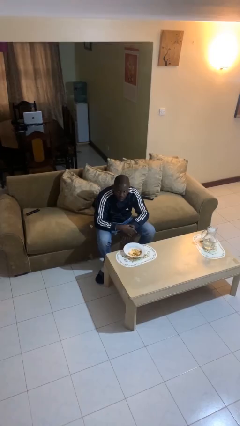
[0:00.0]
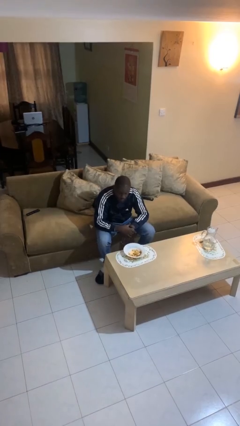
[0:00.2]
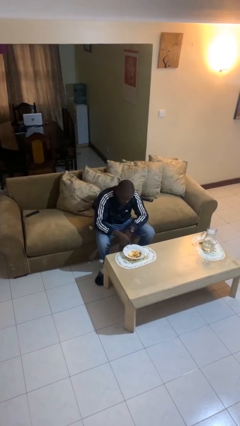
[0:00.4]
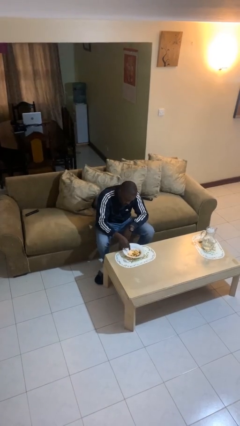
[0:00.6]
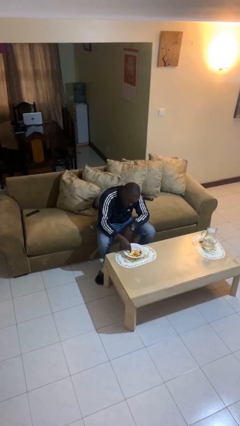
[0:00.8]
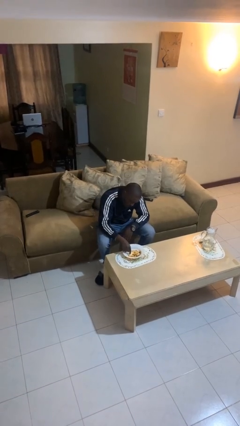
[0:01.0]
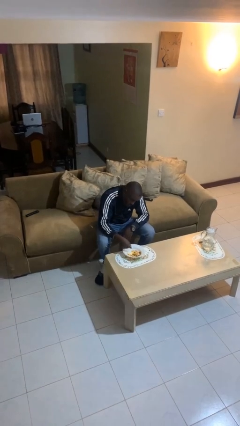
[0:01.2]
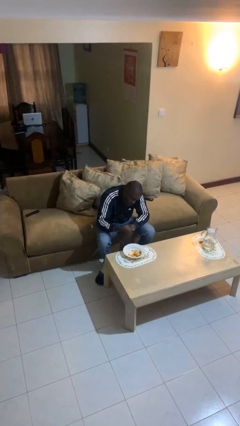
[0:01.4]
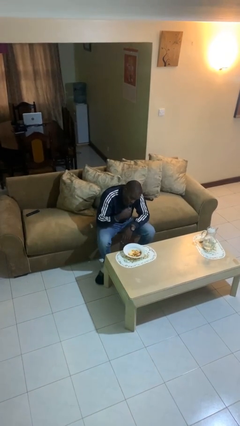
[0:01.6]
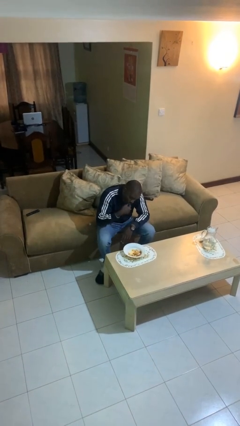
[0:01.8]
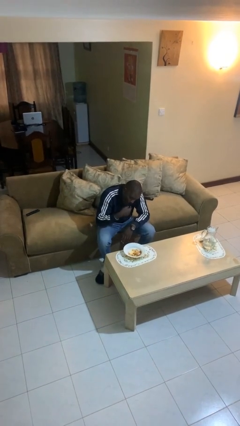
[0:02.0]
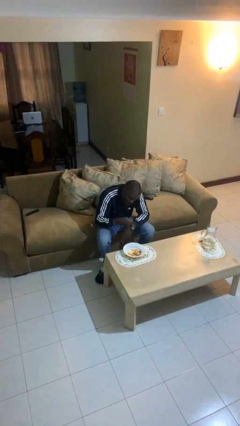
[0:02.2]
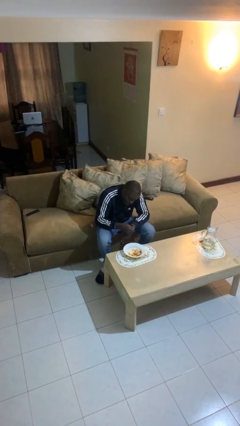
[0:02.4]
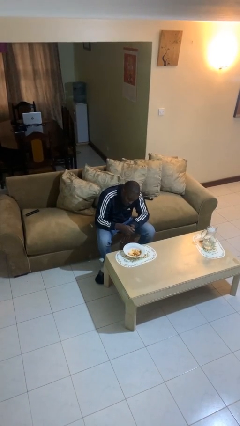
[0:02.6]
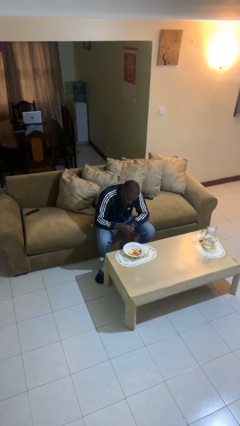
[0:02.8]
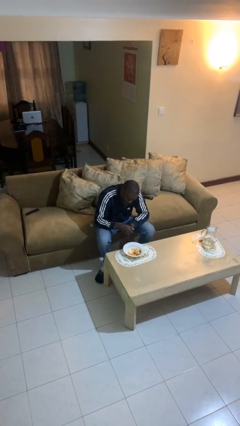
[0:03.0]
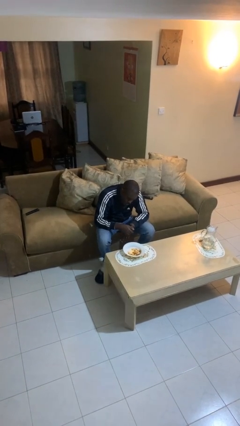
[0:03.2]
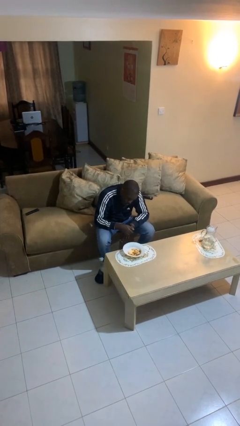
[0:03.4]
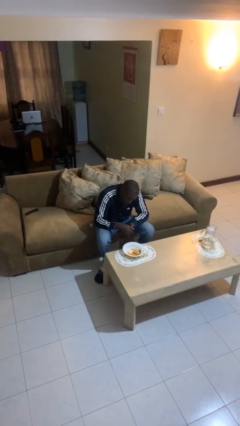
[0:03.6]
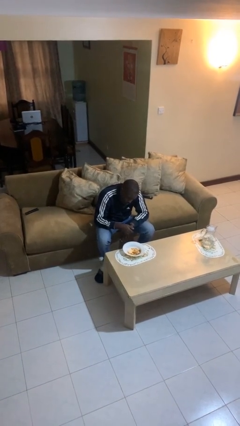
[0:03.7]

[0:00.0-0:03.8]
person eats with hands

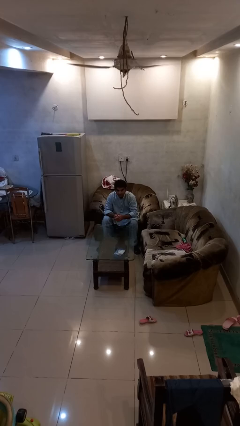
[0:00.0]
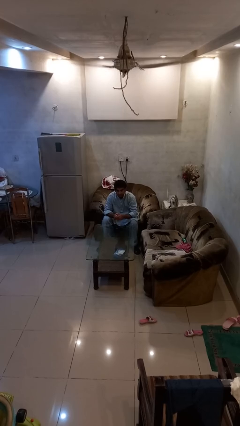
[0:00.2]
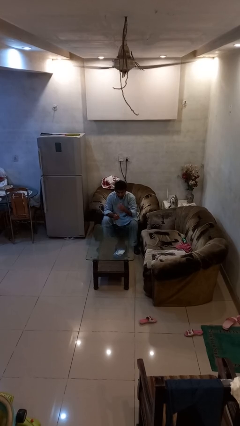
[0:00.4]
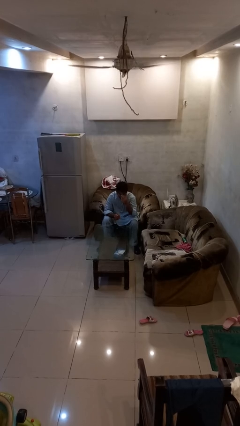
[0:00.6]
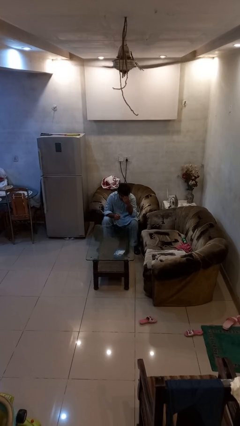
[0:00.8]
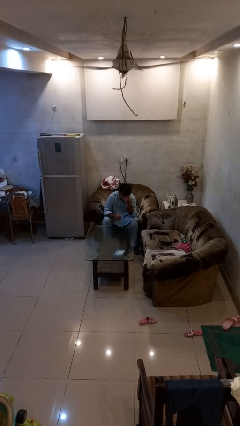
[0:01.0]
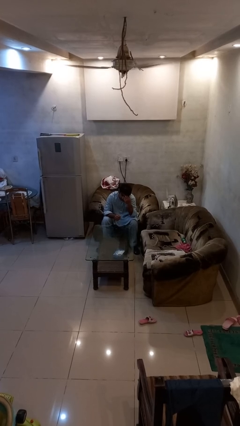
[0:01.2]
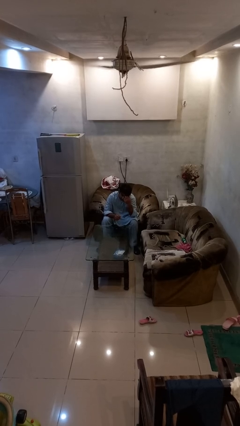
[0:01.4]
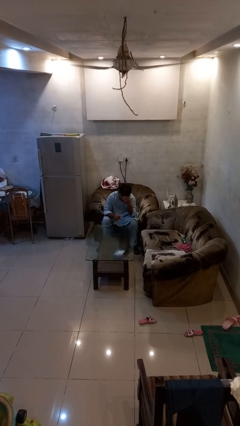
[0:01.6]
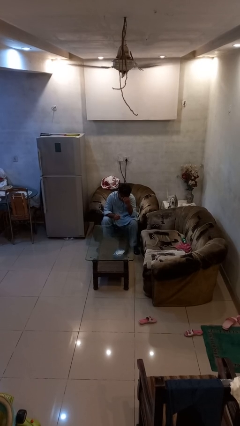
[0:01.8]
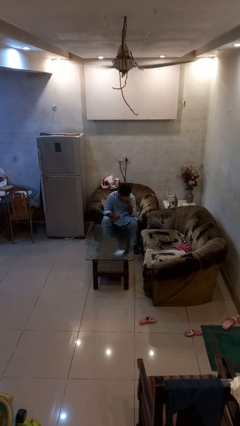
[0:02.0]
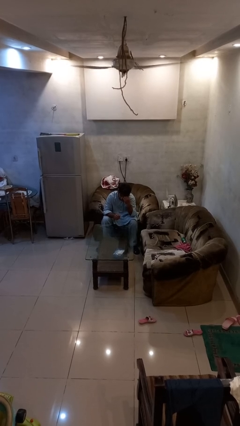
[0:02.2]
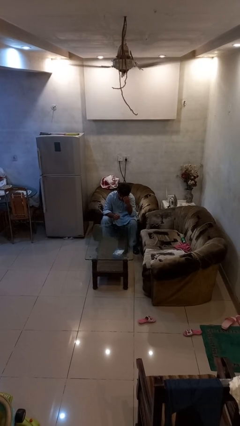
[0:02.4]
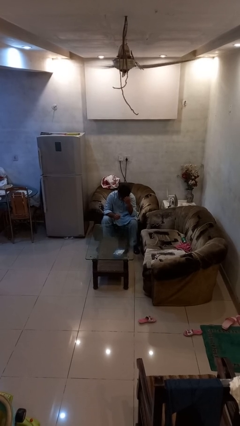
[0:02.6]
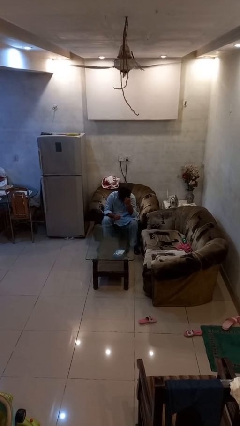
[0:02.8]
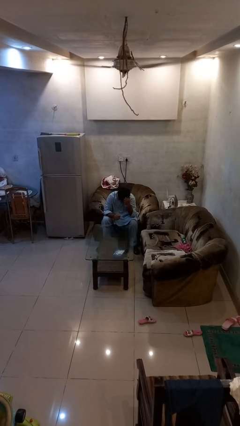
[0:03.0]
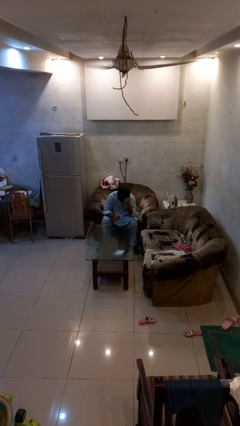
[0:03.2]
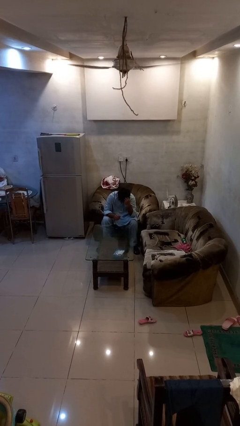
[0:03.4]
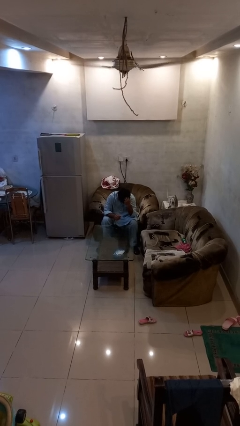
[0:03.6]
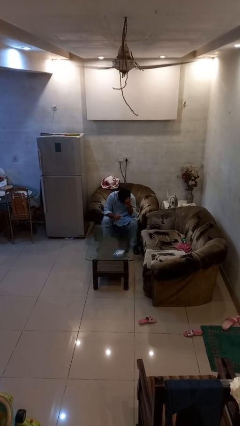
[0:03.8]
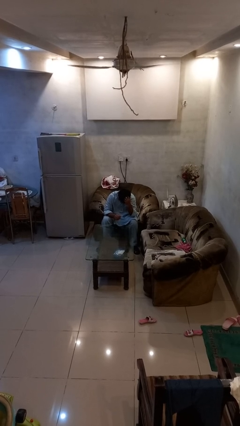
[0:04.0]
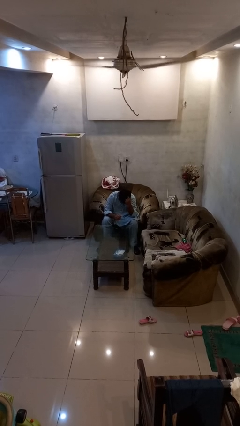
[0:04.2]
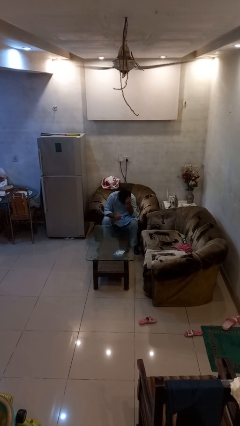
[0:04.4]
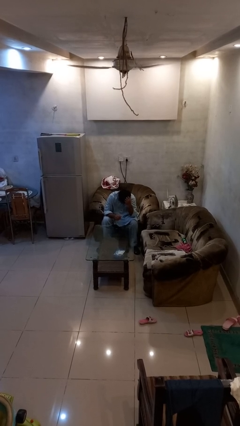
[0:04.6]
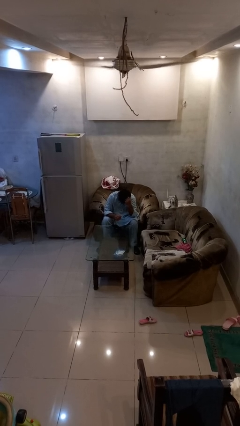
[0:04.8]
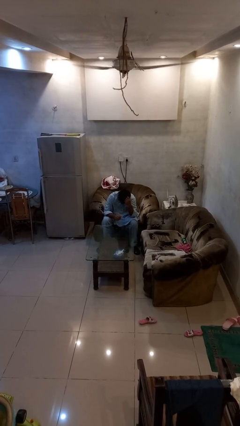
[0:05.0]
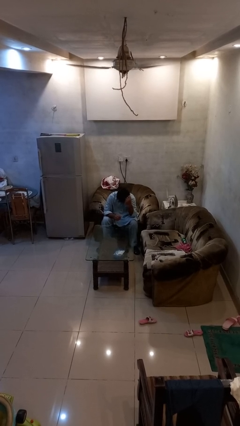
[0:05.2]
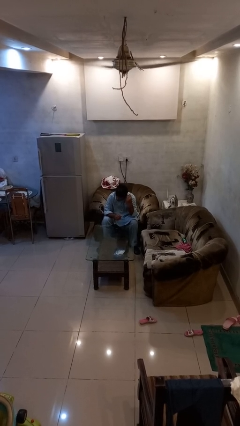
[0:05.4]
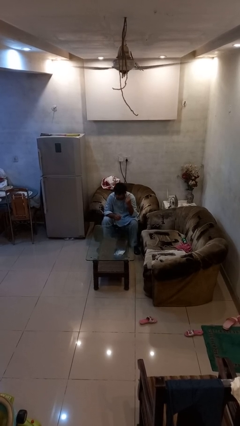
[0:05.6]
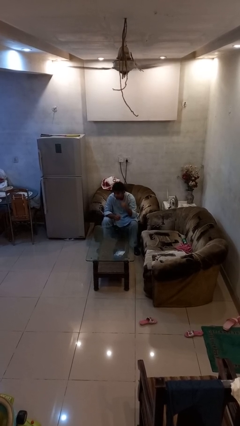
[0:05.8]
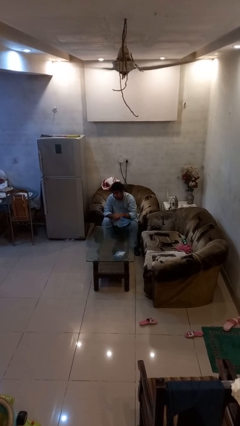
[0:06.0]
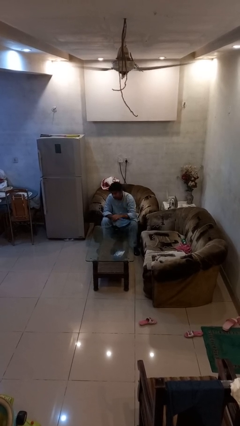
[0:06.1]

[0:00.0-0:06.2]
person scratches face

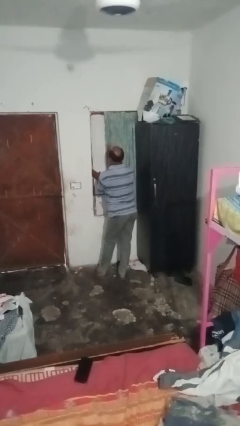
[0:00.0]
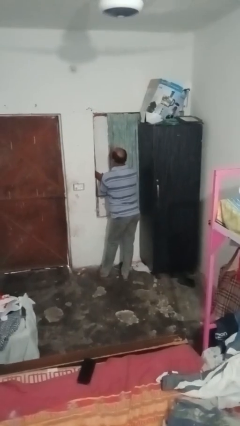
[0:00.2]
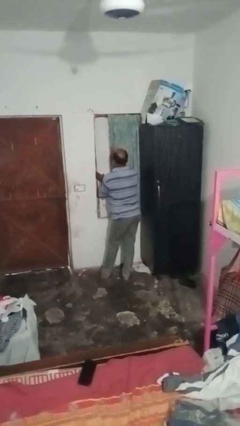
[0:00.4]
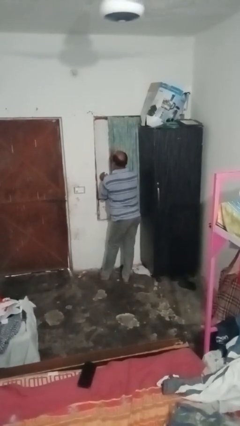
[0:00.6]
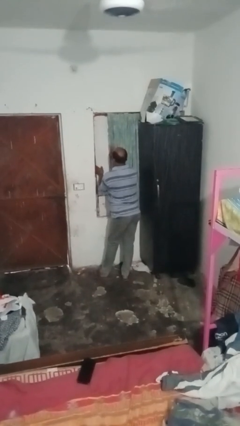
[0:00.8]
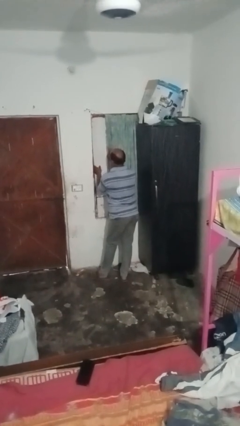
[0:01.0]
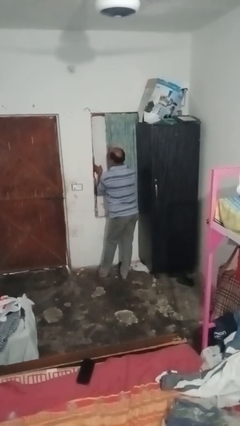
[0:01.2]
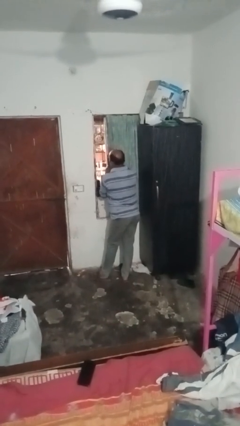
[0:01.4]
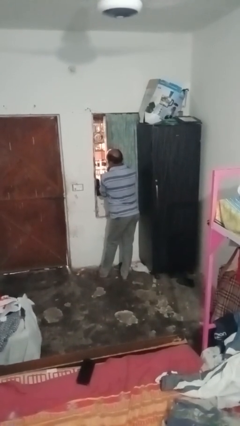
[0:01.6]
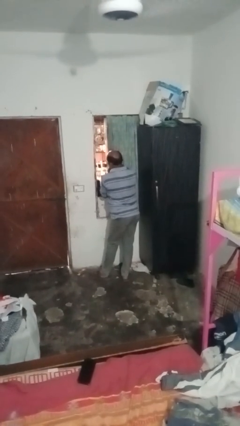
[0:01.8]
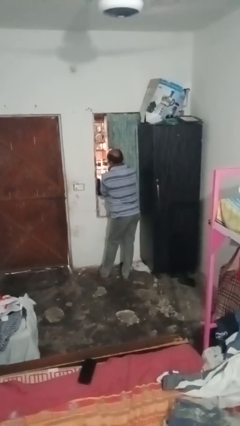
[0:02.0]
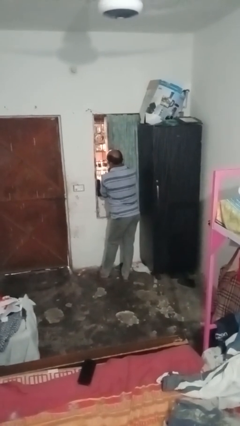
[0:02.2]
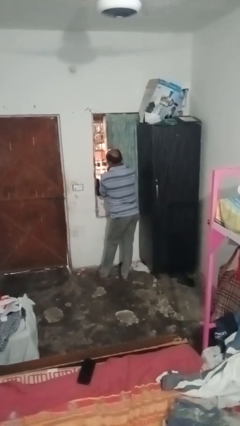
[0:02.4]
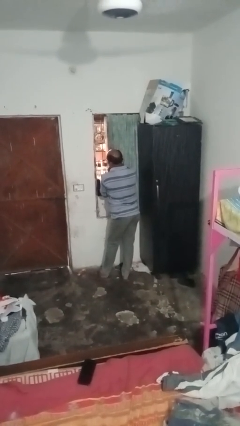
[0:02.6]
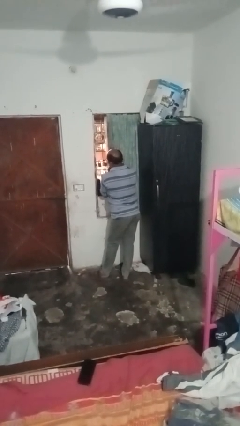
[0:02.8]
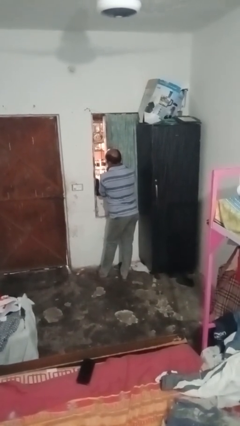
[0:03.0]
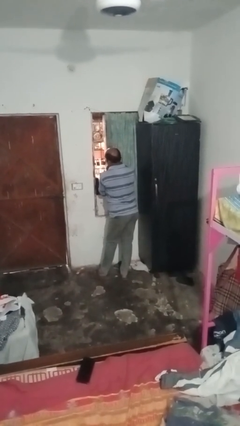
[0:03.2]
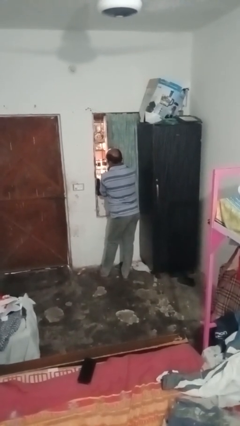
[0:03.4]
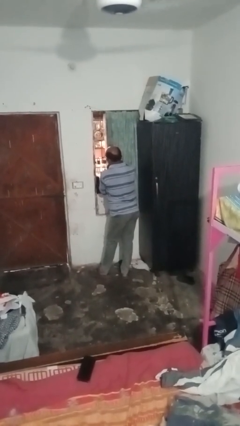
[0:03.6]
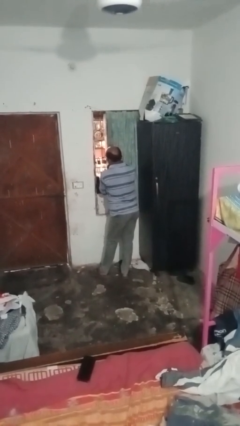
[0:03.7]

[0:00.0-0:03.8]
person opens home window

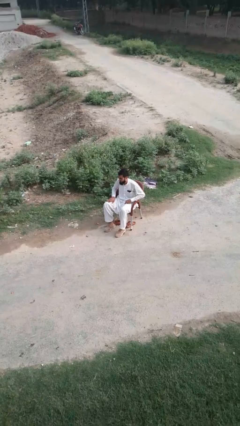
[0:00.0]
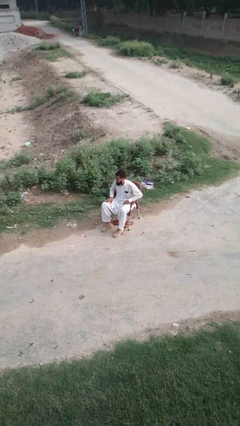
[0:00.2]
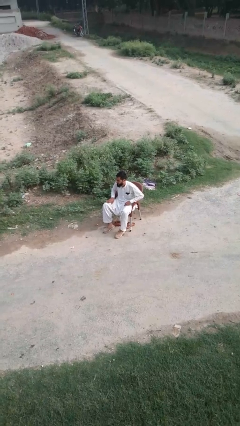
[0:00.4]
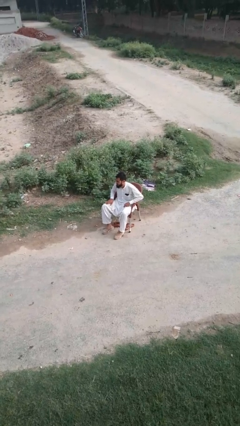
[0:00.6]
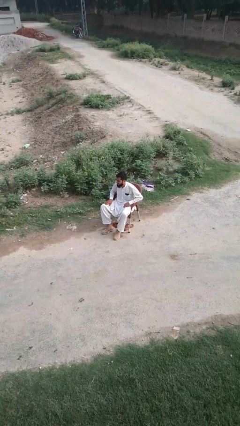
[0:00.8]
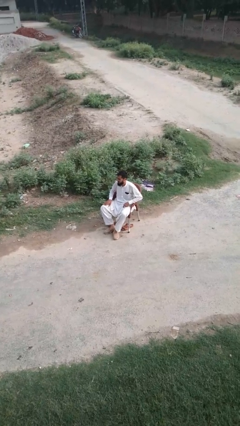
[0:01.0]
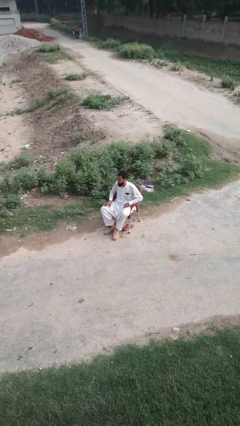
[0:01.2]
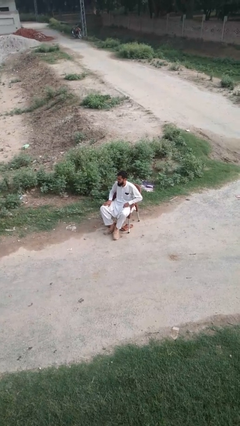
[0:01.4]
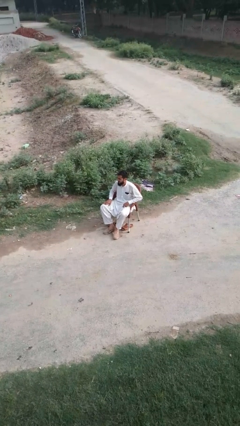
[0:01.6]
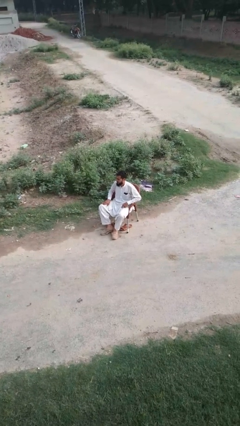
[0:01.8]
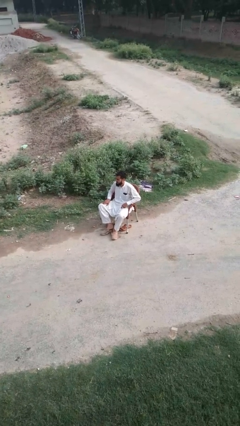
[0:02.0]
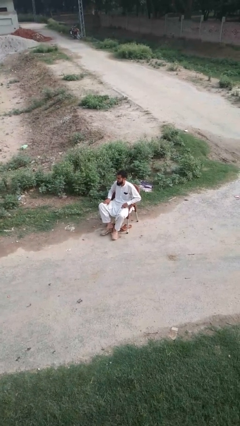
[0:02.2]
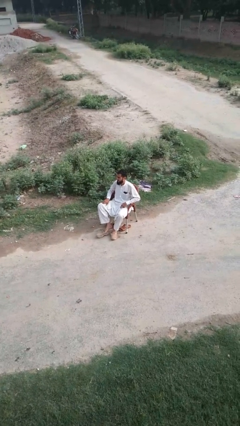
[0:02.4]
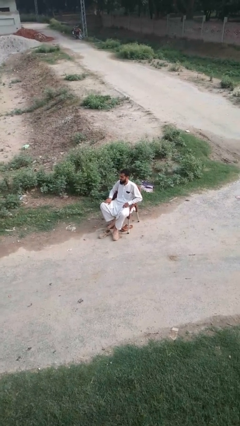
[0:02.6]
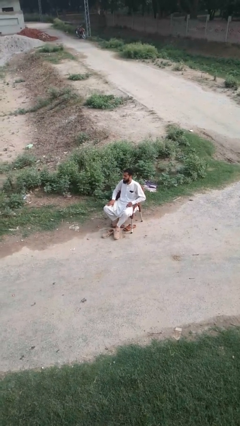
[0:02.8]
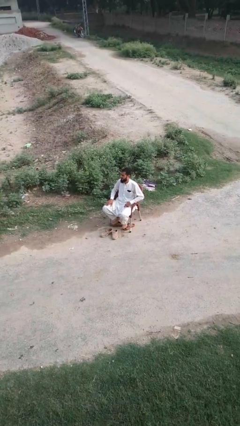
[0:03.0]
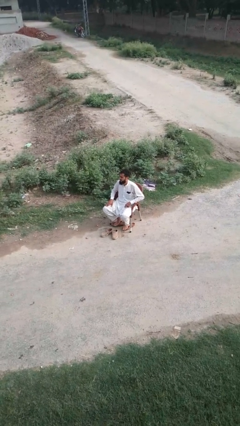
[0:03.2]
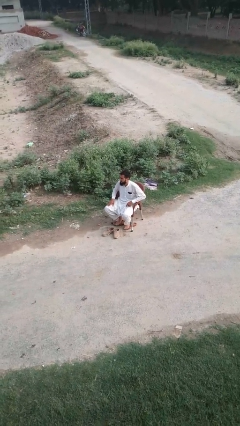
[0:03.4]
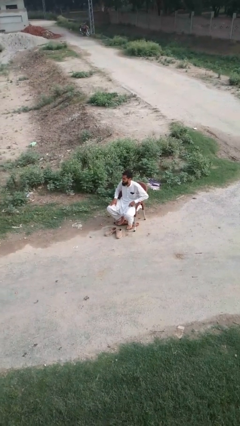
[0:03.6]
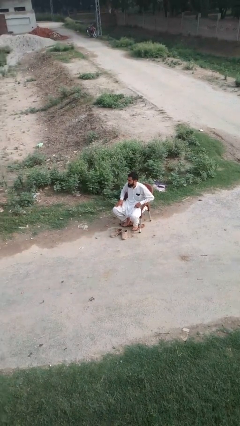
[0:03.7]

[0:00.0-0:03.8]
person takes off shoes
